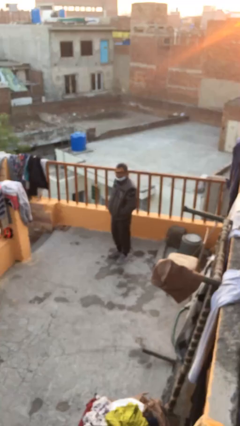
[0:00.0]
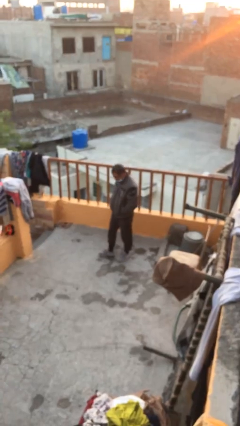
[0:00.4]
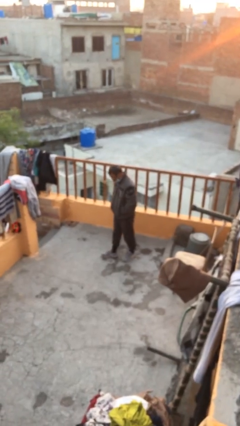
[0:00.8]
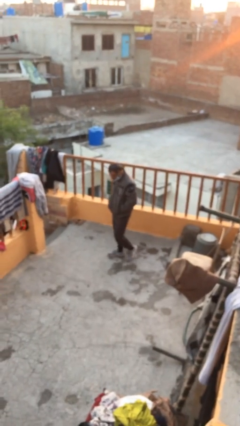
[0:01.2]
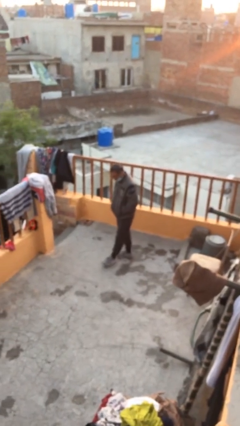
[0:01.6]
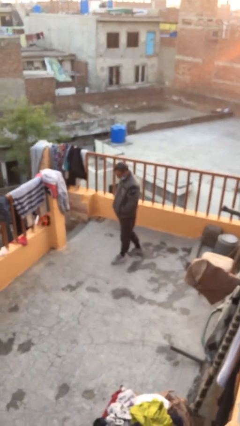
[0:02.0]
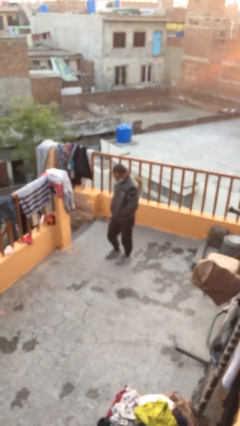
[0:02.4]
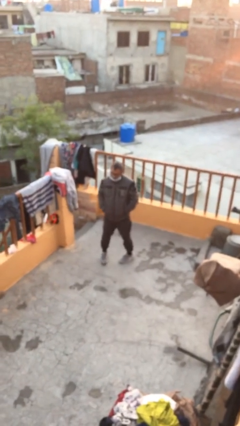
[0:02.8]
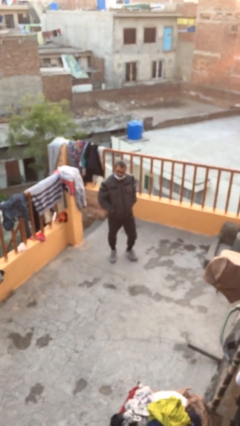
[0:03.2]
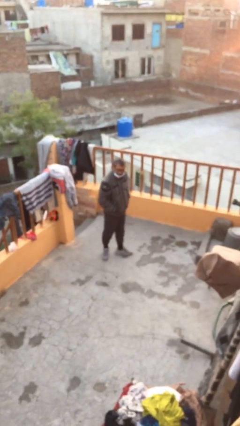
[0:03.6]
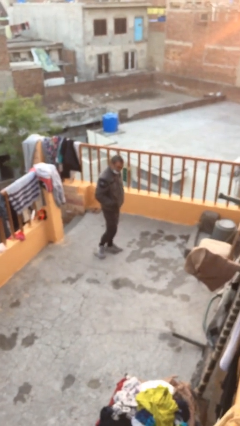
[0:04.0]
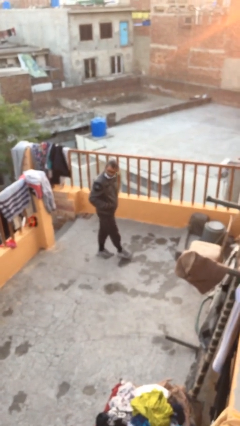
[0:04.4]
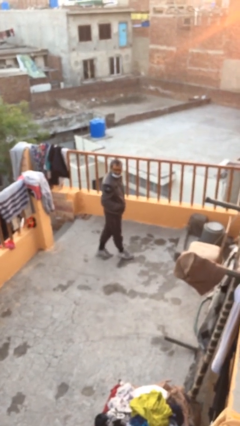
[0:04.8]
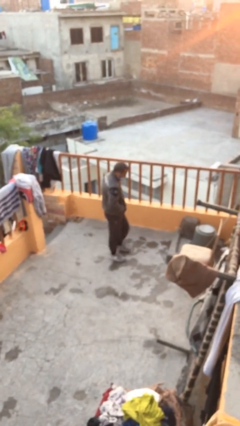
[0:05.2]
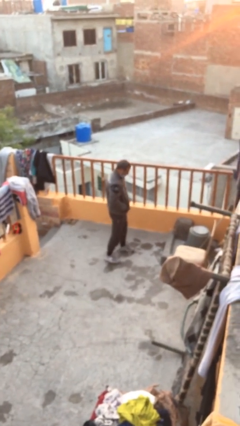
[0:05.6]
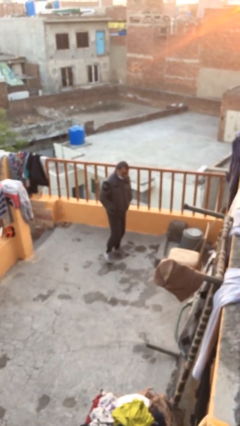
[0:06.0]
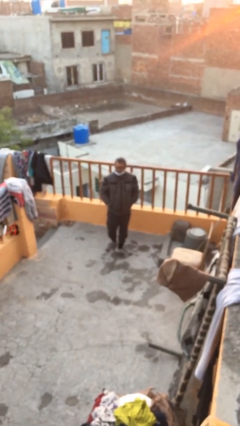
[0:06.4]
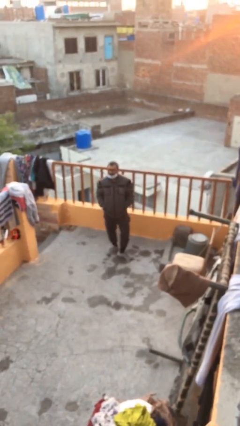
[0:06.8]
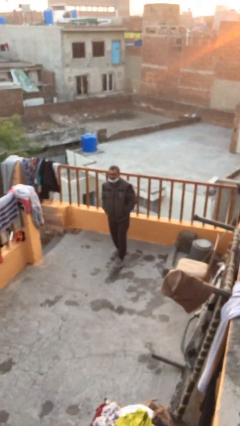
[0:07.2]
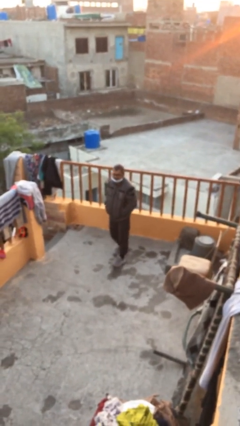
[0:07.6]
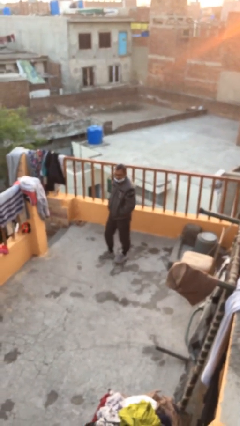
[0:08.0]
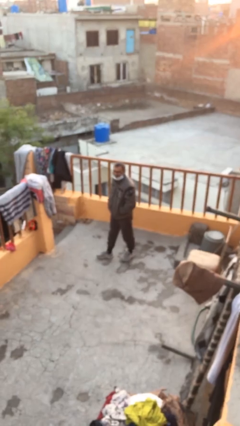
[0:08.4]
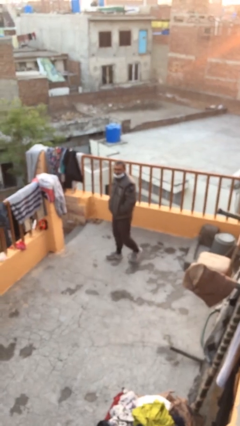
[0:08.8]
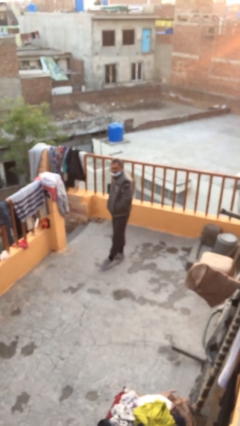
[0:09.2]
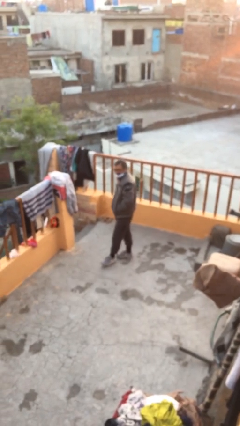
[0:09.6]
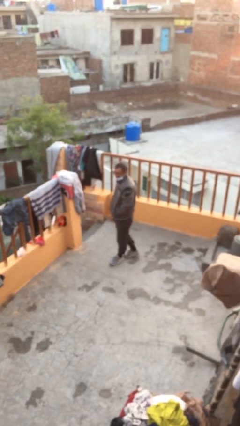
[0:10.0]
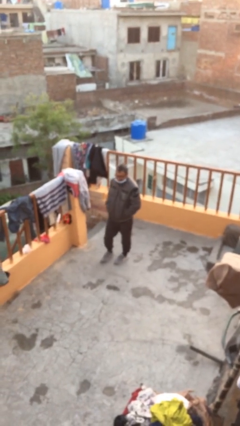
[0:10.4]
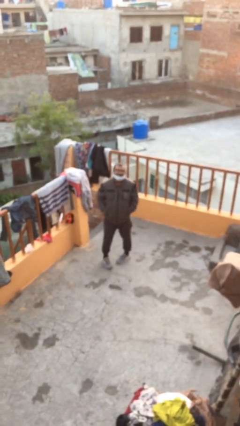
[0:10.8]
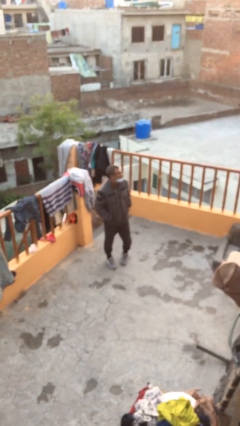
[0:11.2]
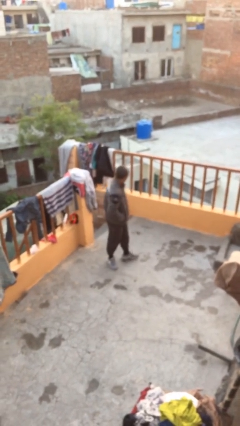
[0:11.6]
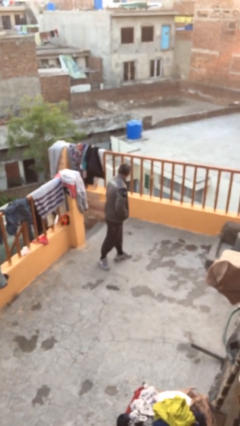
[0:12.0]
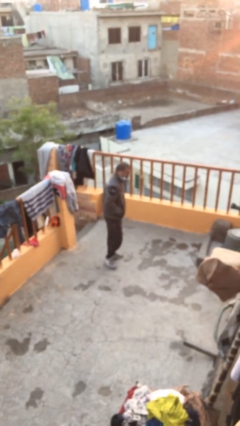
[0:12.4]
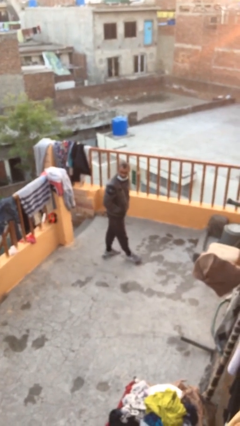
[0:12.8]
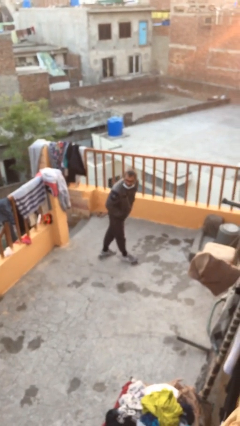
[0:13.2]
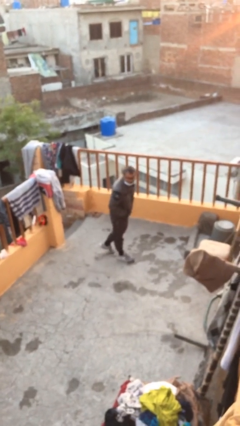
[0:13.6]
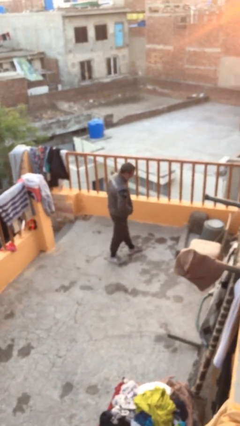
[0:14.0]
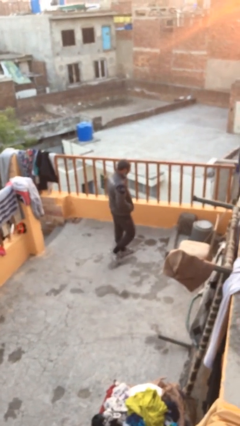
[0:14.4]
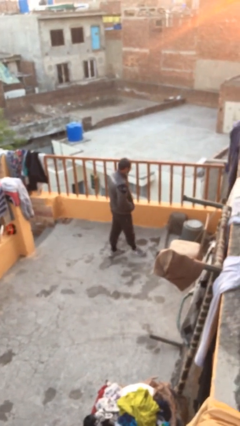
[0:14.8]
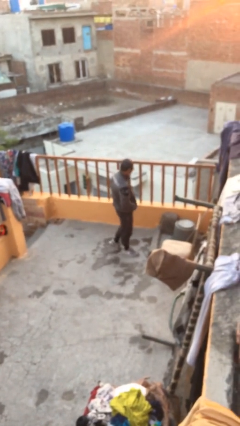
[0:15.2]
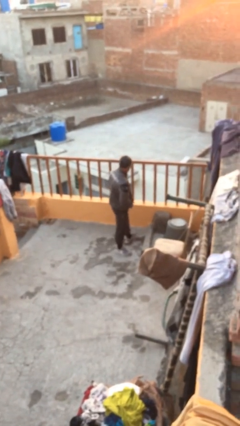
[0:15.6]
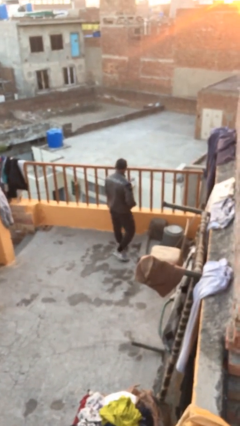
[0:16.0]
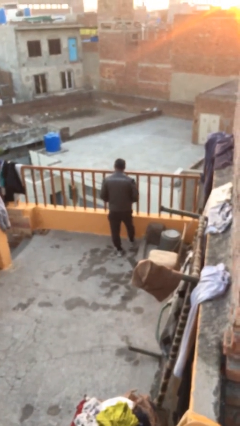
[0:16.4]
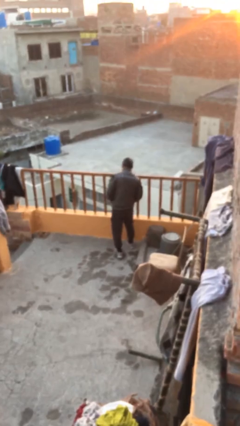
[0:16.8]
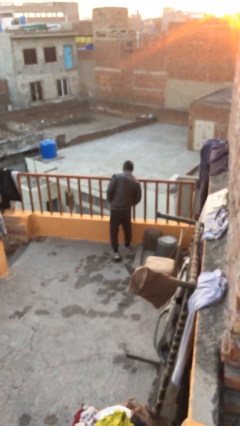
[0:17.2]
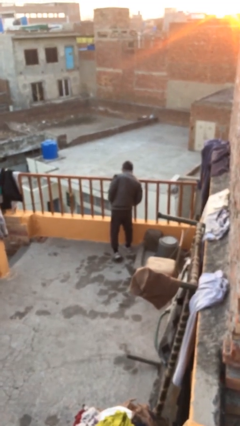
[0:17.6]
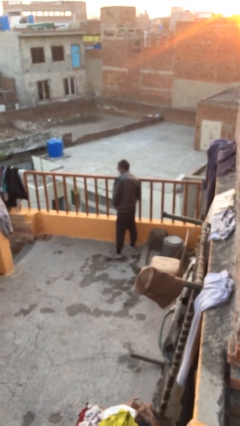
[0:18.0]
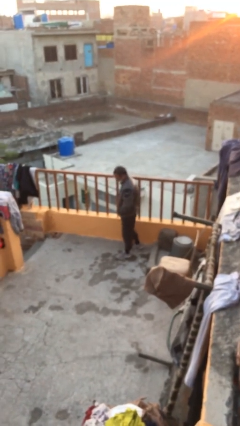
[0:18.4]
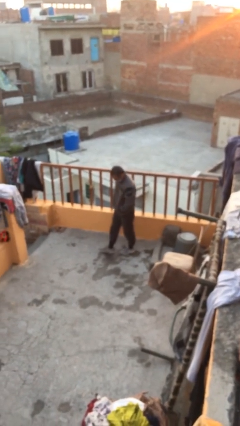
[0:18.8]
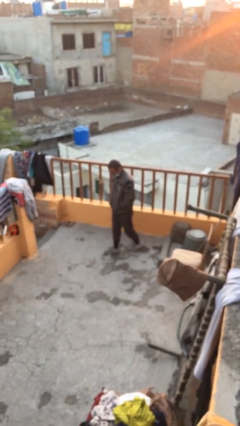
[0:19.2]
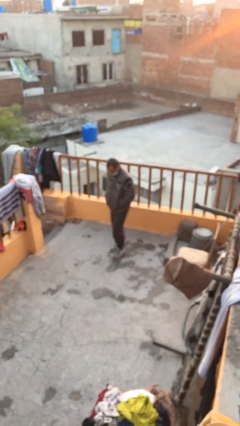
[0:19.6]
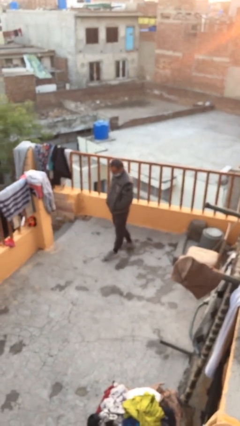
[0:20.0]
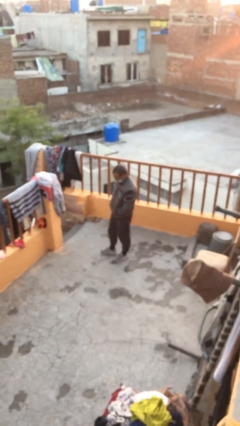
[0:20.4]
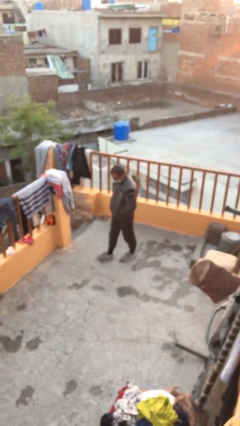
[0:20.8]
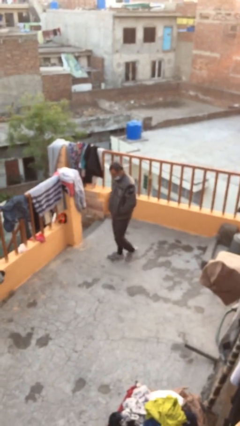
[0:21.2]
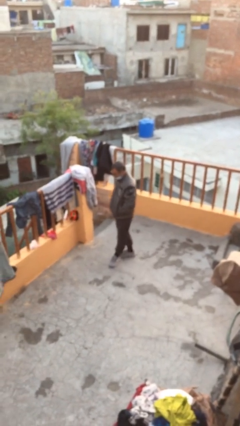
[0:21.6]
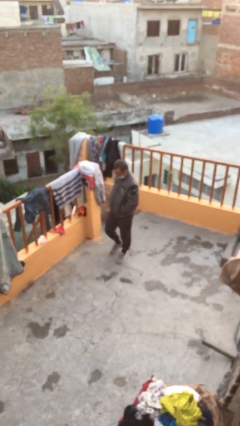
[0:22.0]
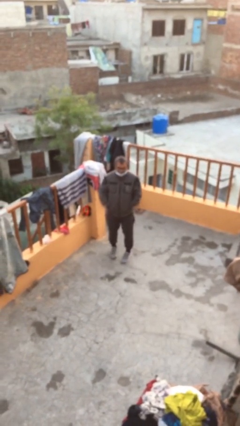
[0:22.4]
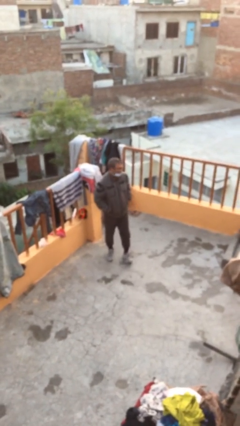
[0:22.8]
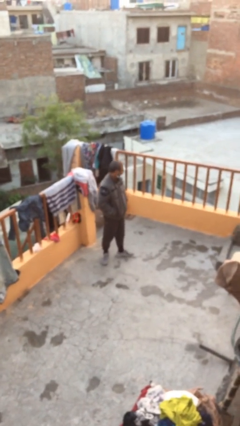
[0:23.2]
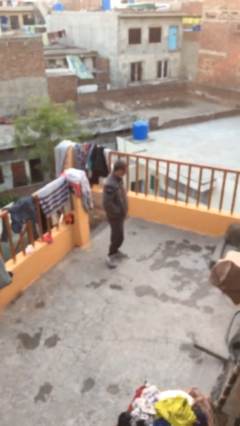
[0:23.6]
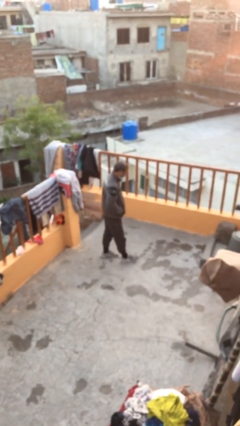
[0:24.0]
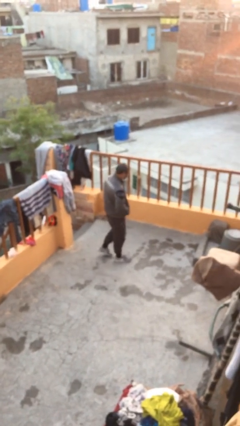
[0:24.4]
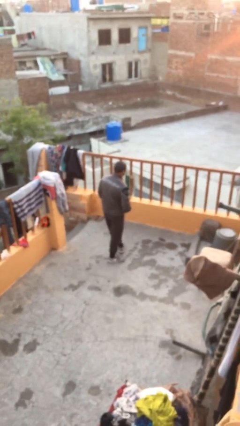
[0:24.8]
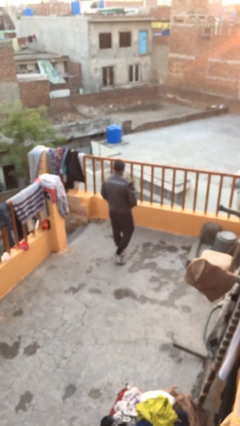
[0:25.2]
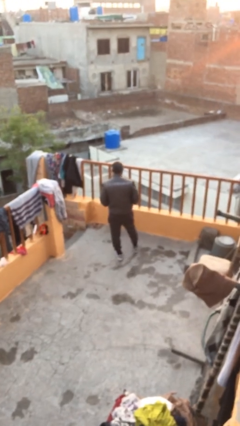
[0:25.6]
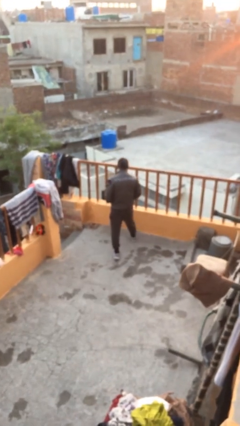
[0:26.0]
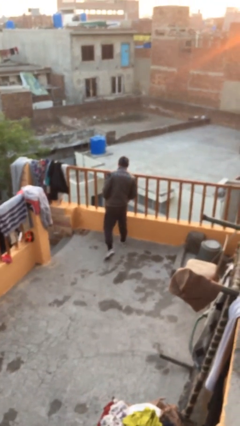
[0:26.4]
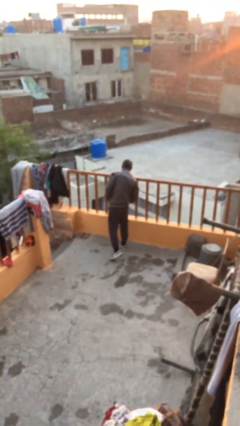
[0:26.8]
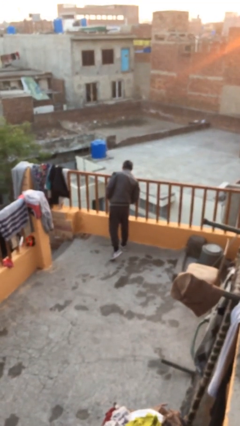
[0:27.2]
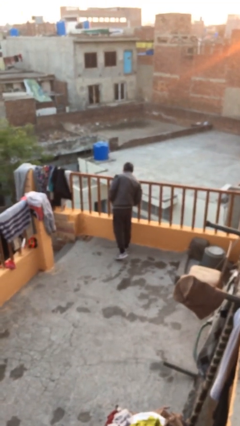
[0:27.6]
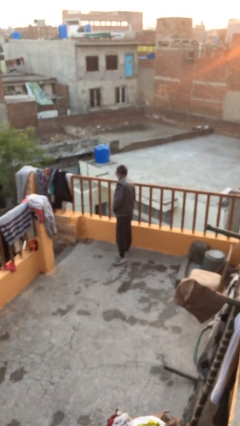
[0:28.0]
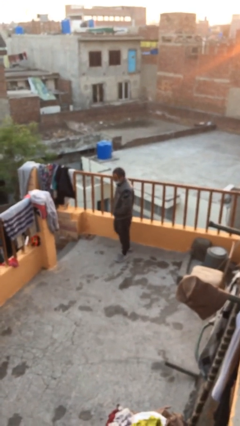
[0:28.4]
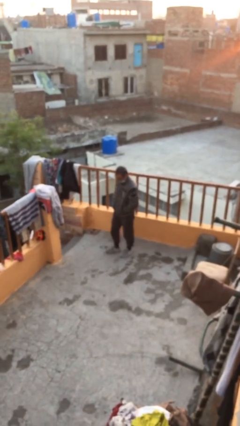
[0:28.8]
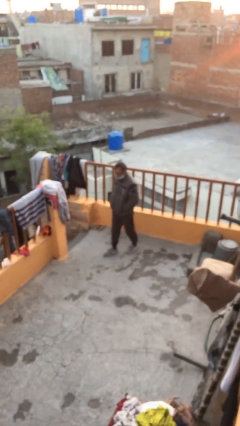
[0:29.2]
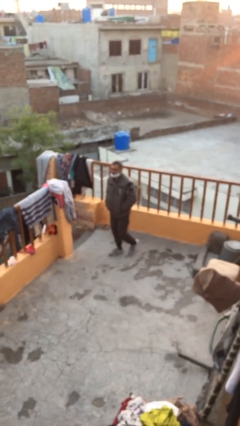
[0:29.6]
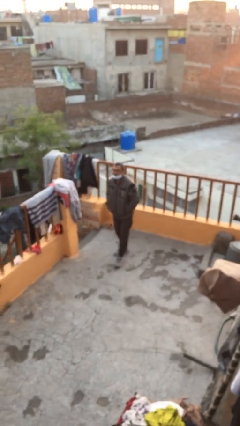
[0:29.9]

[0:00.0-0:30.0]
person walks

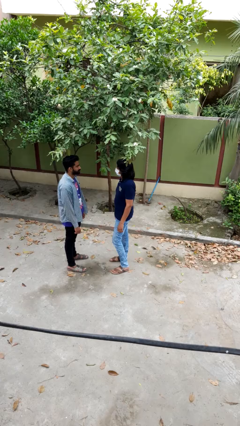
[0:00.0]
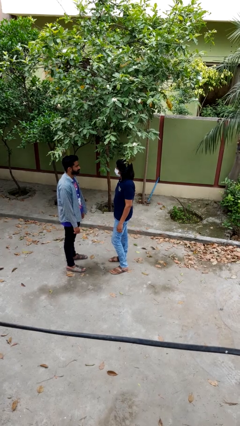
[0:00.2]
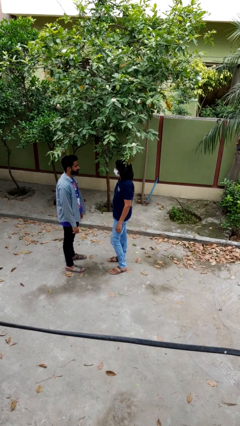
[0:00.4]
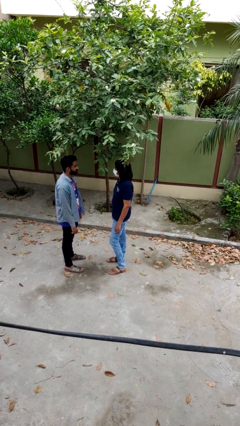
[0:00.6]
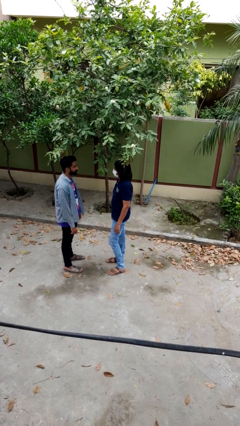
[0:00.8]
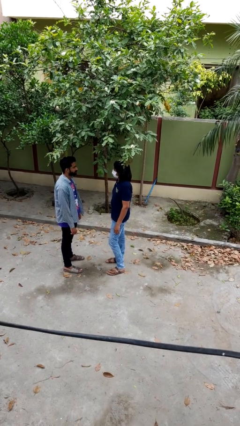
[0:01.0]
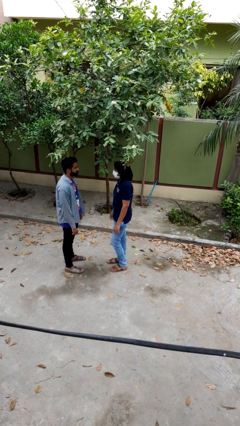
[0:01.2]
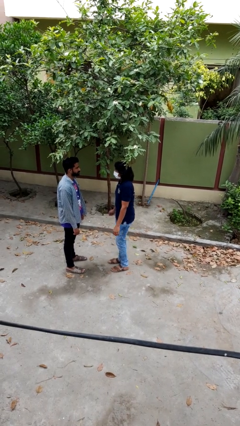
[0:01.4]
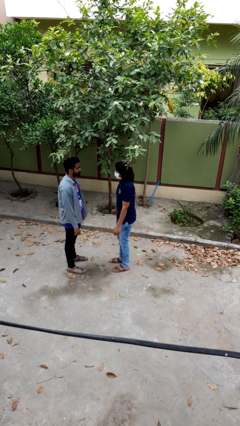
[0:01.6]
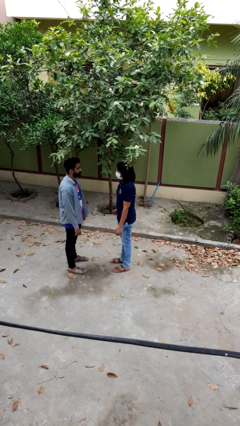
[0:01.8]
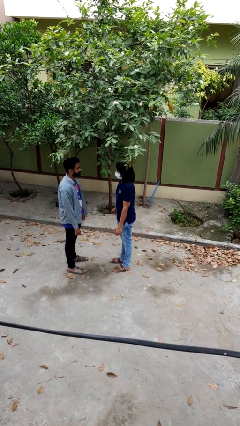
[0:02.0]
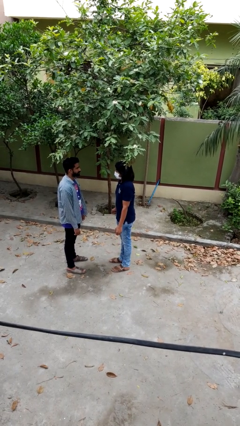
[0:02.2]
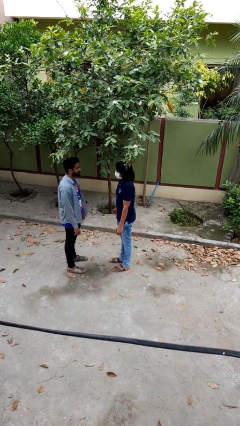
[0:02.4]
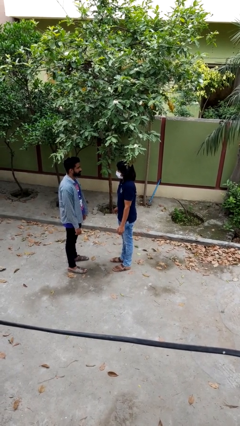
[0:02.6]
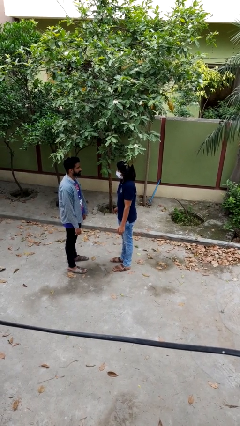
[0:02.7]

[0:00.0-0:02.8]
person highfives hand

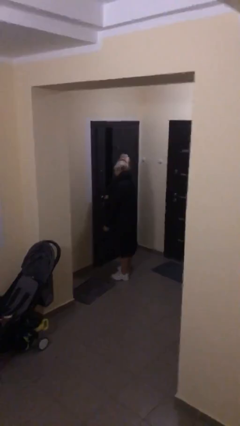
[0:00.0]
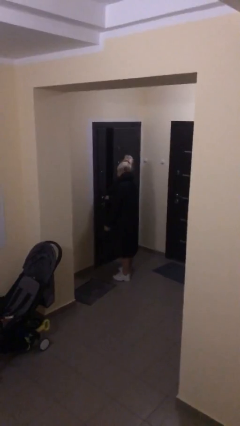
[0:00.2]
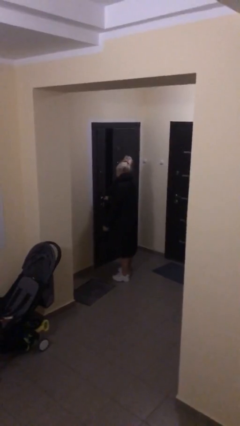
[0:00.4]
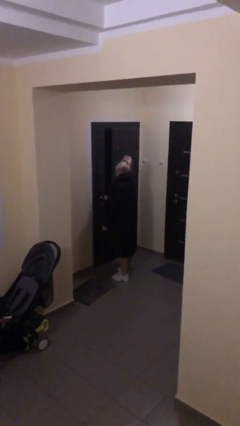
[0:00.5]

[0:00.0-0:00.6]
person closes facility door
